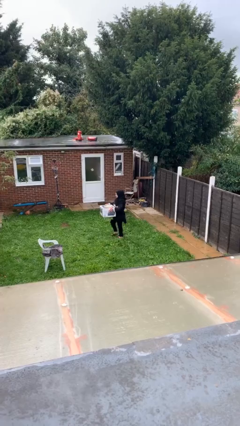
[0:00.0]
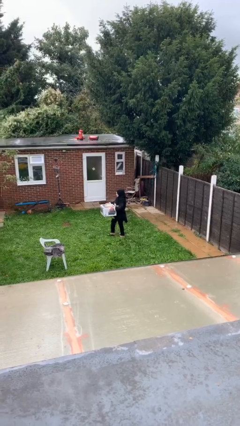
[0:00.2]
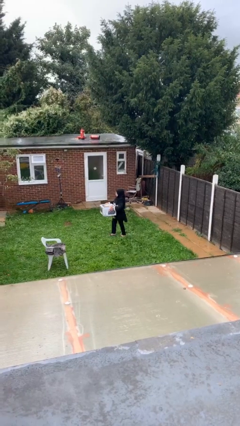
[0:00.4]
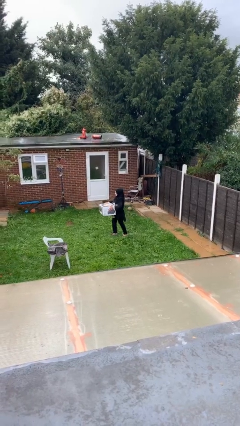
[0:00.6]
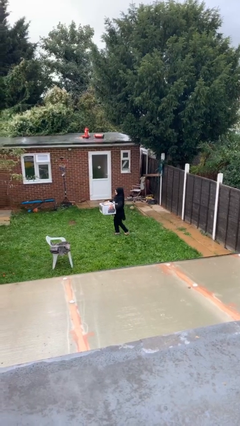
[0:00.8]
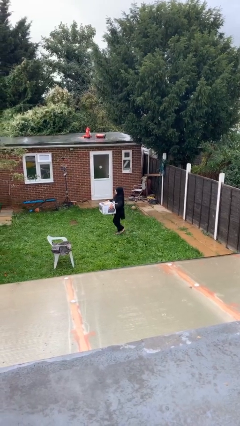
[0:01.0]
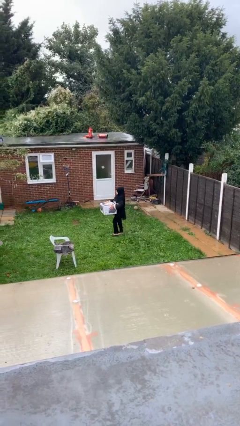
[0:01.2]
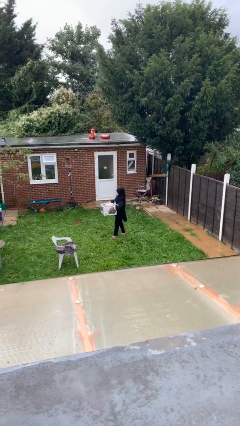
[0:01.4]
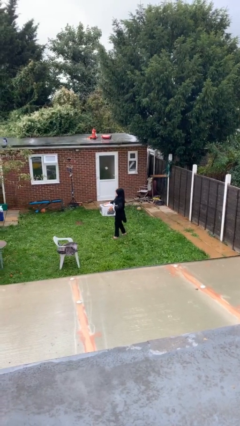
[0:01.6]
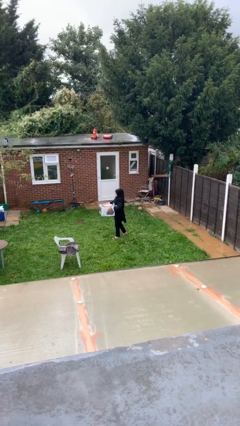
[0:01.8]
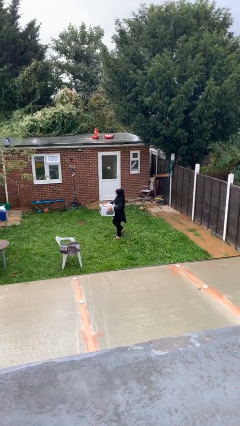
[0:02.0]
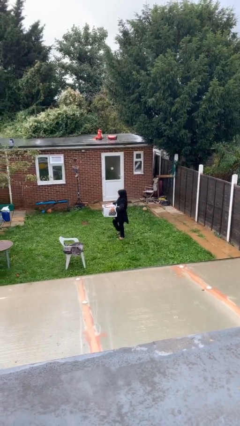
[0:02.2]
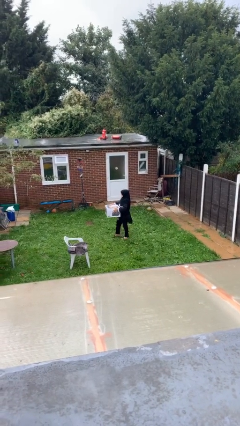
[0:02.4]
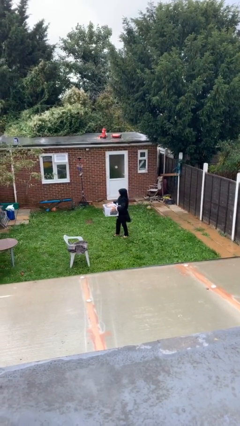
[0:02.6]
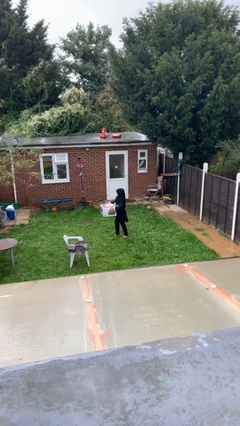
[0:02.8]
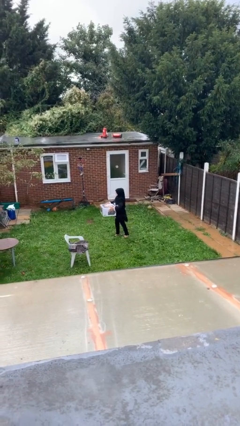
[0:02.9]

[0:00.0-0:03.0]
person carries heavy object

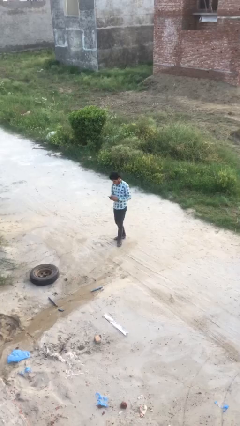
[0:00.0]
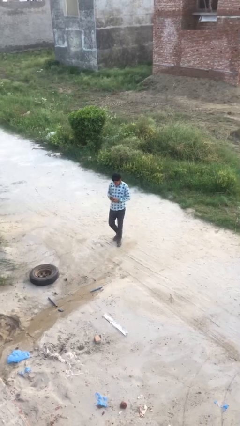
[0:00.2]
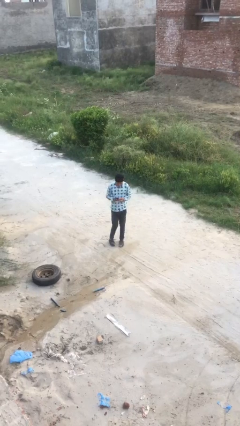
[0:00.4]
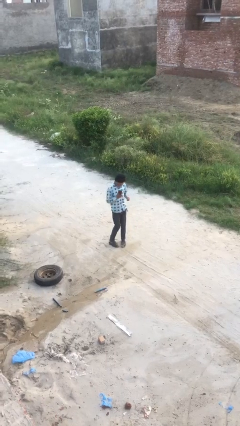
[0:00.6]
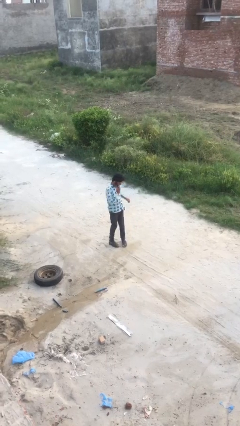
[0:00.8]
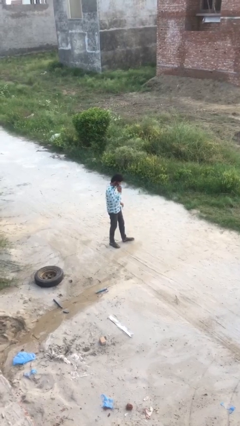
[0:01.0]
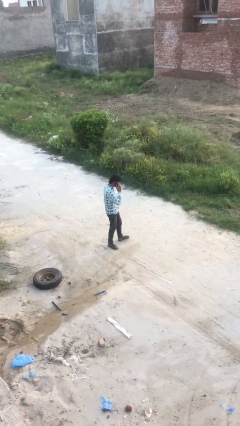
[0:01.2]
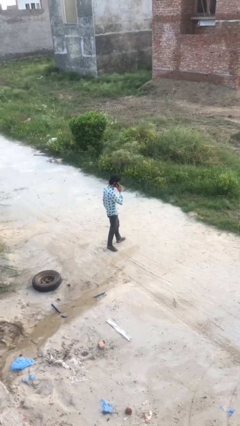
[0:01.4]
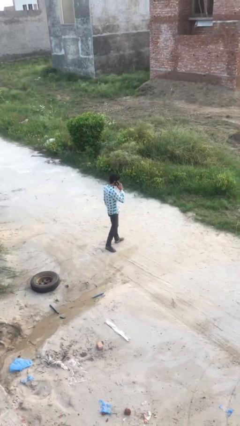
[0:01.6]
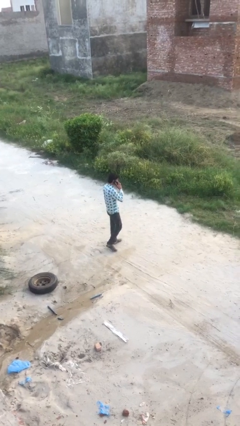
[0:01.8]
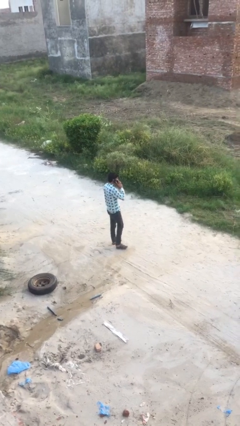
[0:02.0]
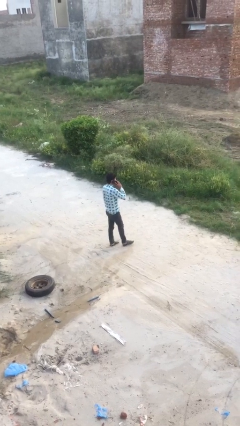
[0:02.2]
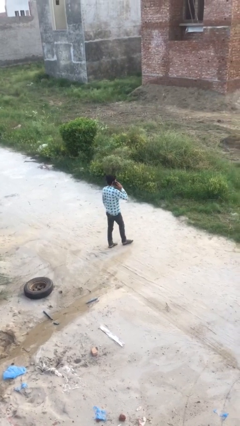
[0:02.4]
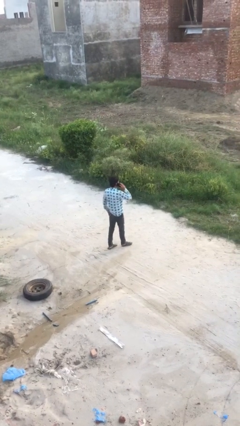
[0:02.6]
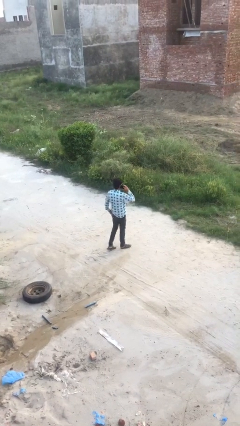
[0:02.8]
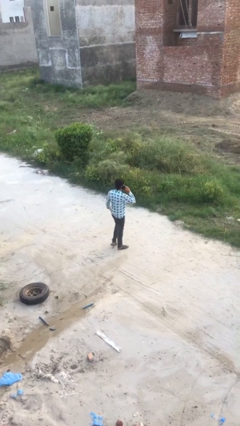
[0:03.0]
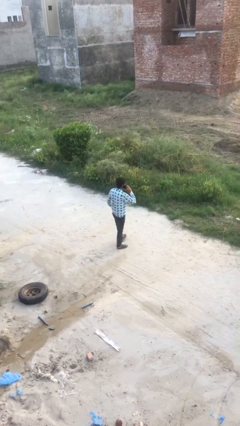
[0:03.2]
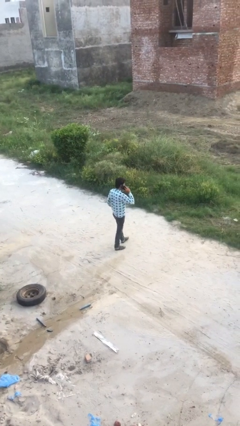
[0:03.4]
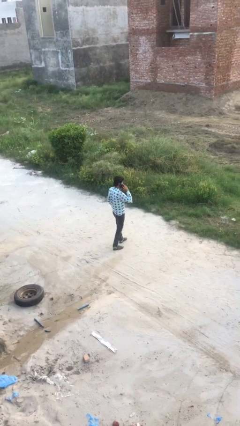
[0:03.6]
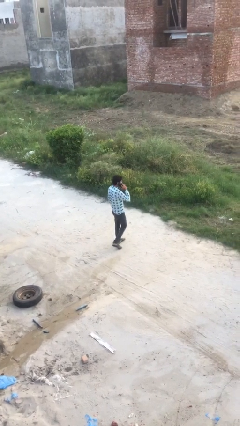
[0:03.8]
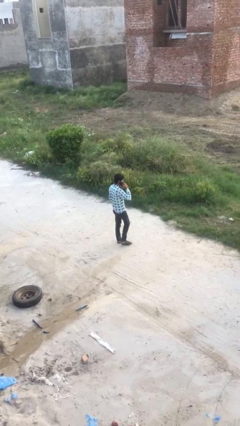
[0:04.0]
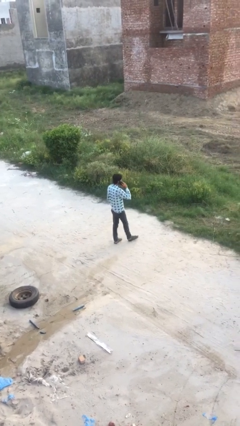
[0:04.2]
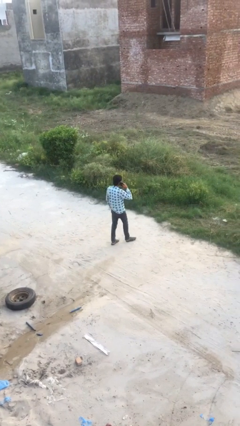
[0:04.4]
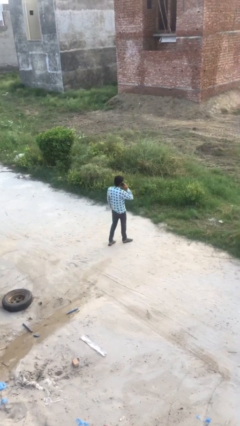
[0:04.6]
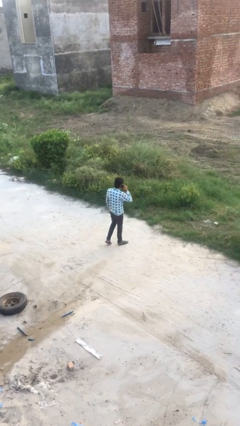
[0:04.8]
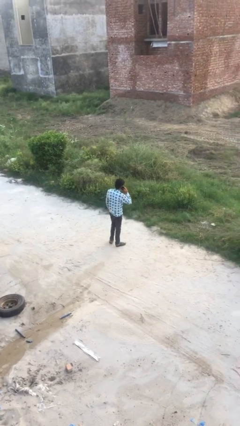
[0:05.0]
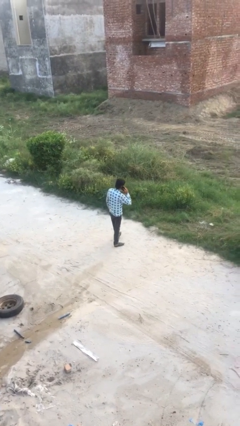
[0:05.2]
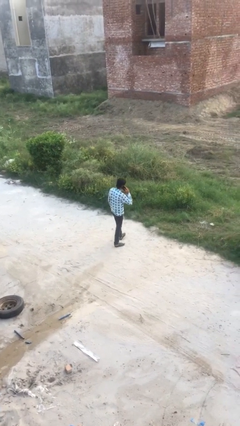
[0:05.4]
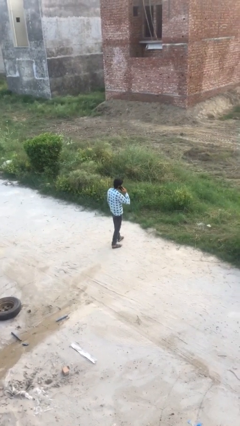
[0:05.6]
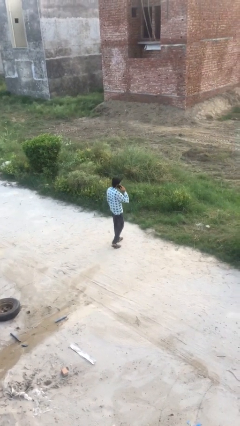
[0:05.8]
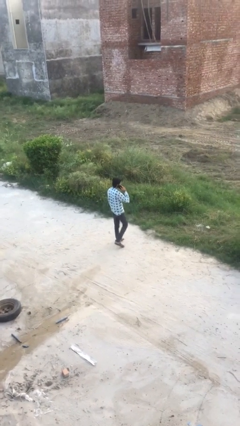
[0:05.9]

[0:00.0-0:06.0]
person talks on phone

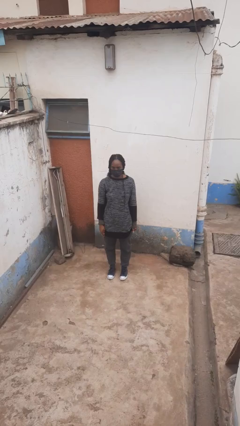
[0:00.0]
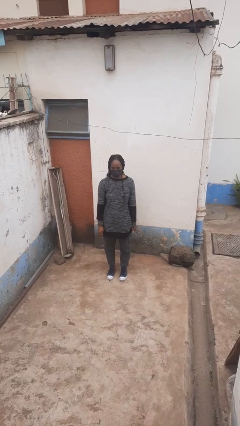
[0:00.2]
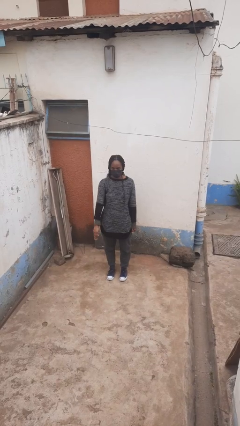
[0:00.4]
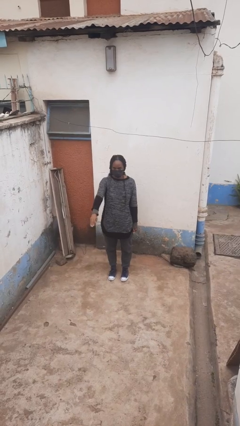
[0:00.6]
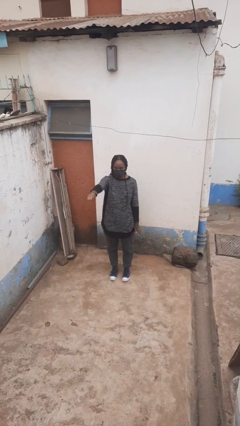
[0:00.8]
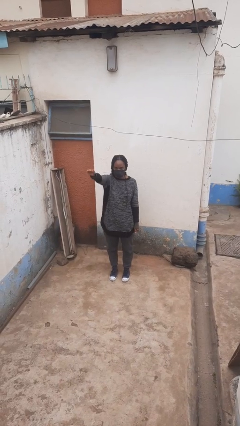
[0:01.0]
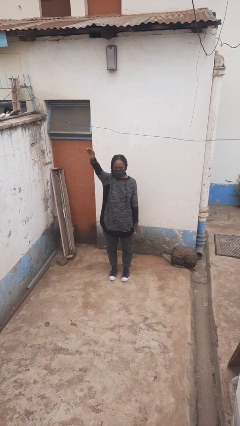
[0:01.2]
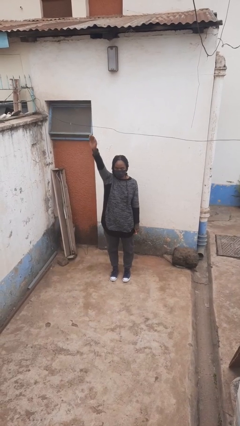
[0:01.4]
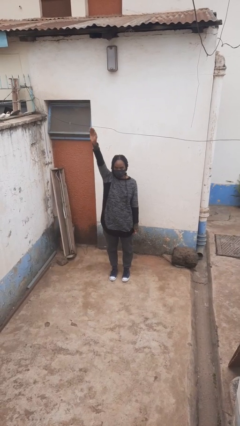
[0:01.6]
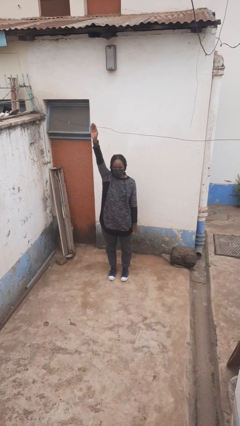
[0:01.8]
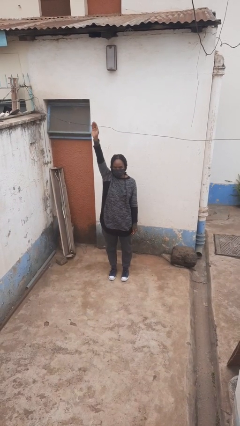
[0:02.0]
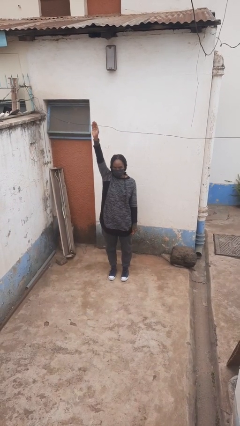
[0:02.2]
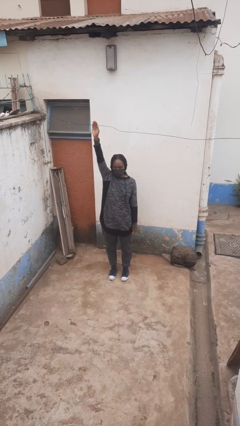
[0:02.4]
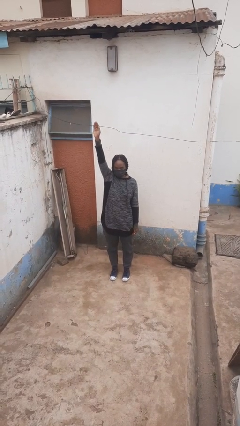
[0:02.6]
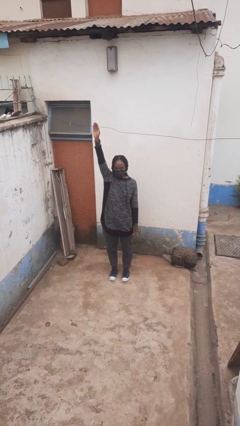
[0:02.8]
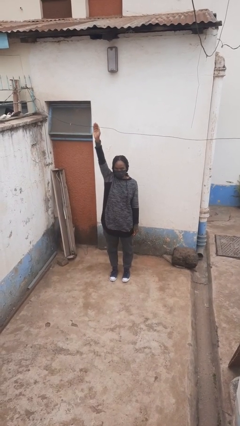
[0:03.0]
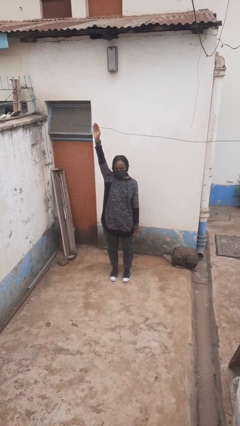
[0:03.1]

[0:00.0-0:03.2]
person gestures raise hand

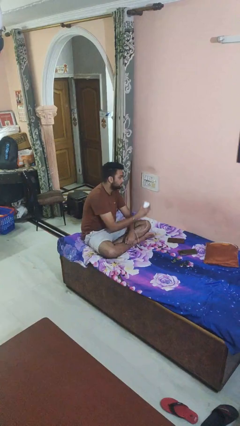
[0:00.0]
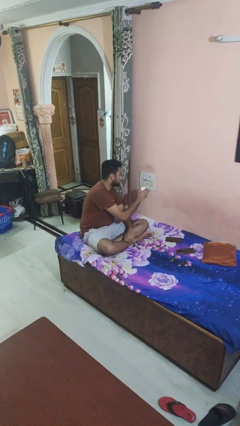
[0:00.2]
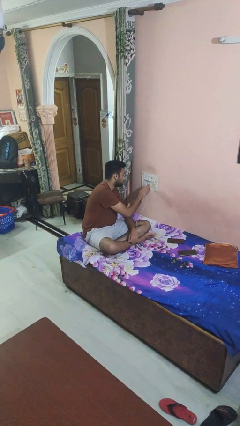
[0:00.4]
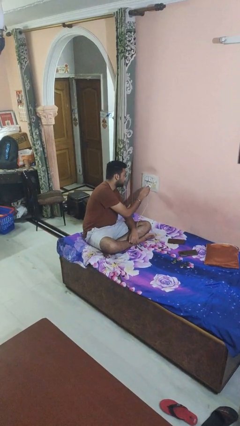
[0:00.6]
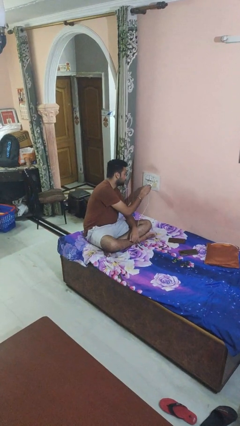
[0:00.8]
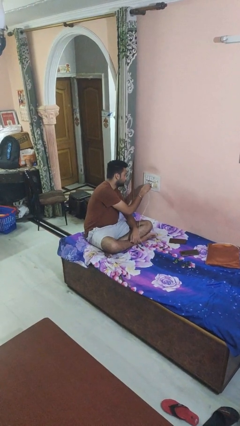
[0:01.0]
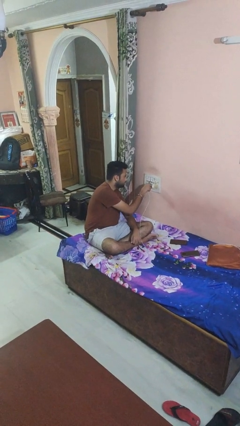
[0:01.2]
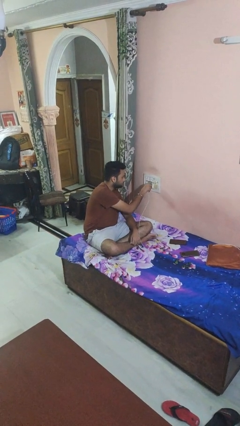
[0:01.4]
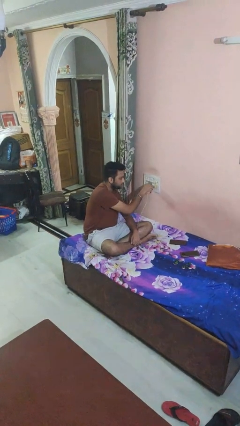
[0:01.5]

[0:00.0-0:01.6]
person plugs into electrical socket

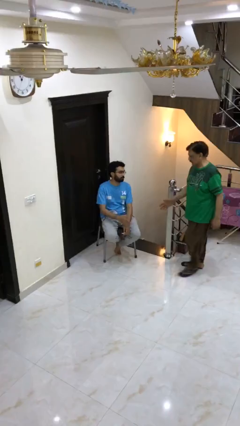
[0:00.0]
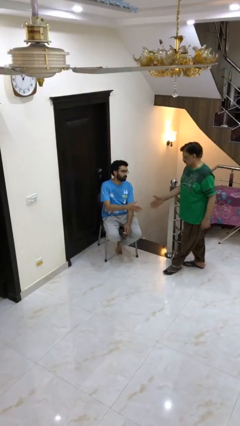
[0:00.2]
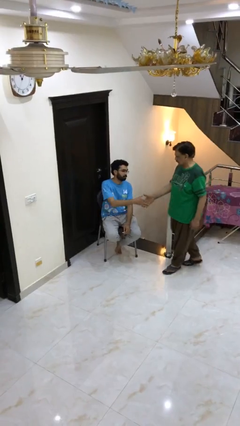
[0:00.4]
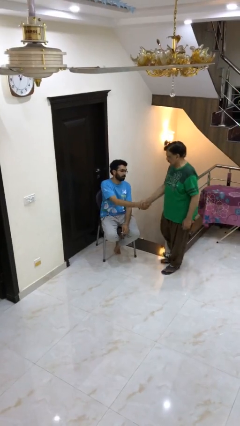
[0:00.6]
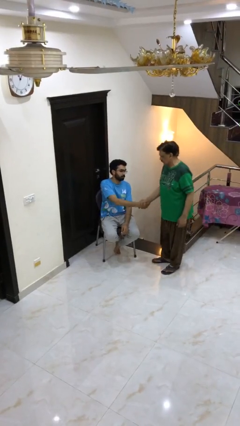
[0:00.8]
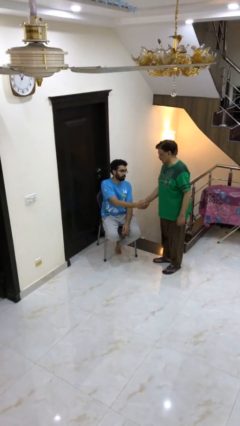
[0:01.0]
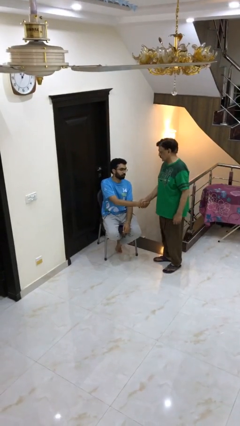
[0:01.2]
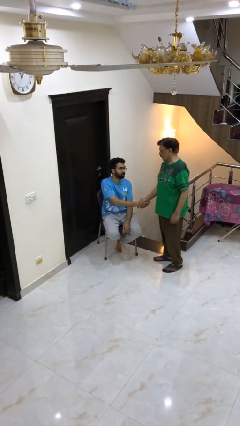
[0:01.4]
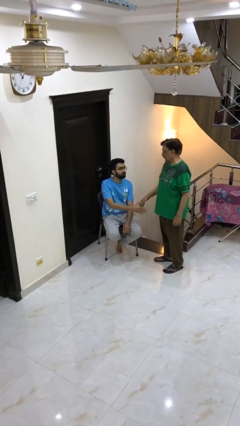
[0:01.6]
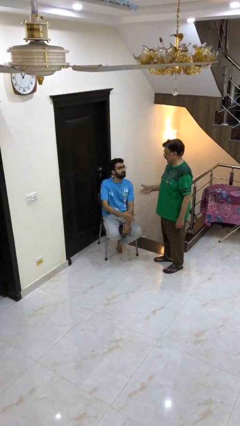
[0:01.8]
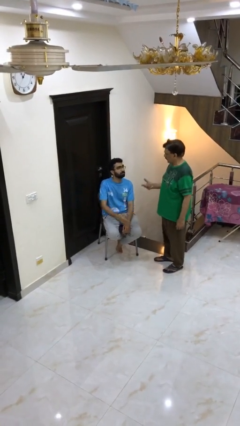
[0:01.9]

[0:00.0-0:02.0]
person shakes hand

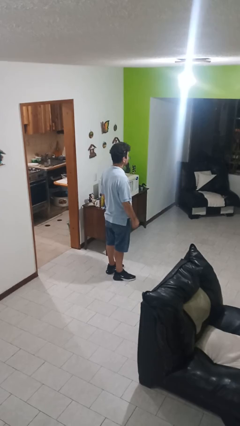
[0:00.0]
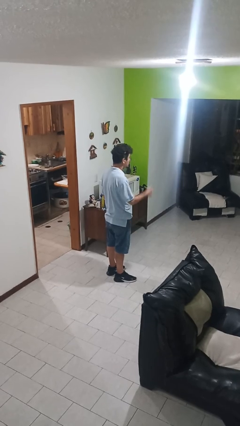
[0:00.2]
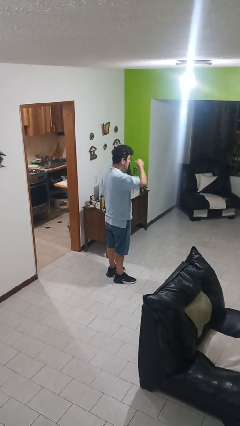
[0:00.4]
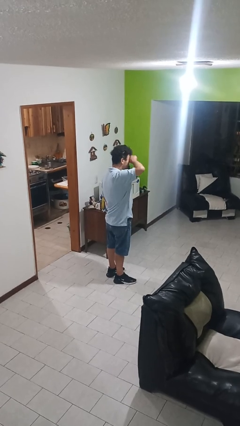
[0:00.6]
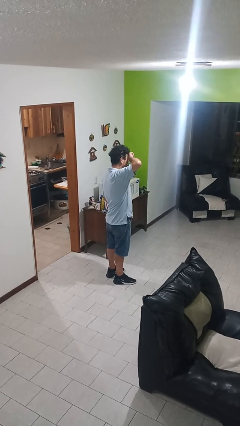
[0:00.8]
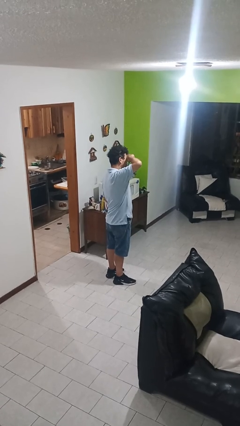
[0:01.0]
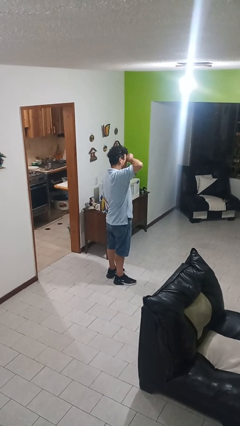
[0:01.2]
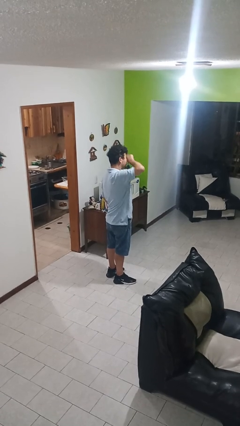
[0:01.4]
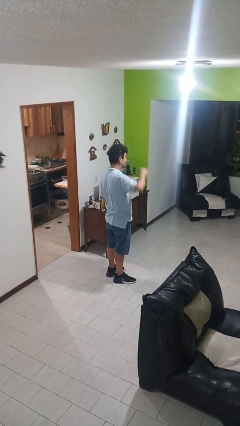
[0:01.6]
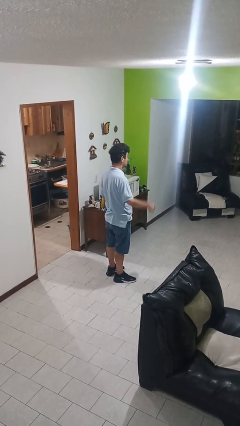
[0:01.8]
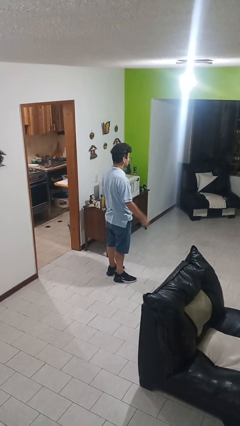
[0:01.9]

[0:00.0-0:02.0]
person rubs eyes
